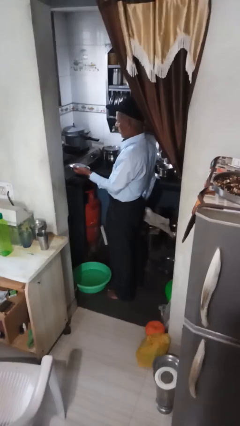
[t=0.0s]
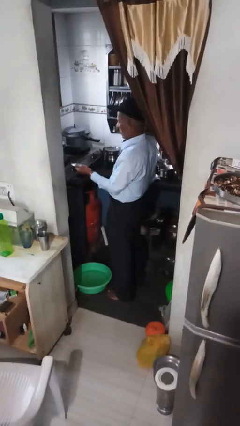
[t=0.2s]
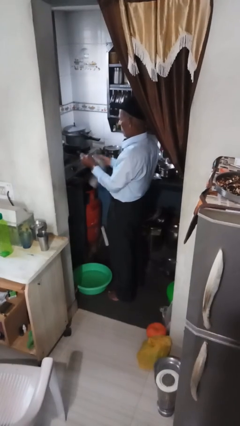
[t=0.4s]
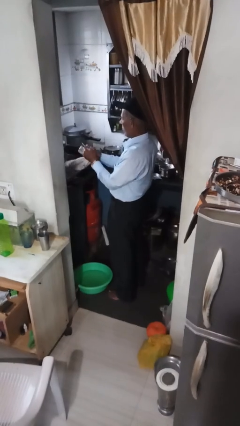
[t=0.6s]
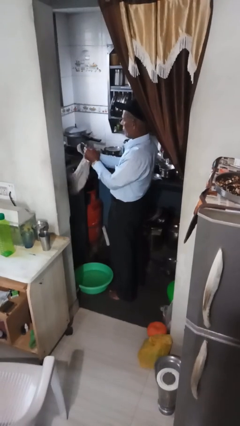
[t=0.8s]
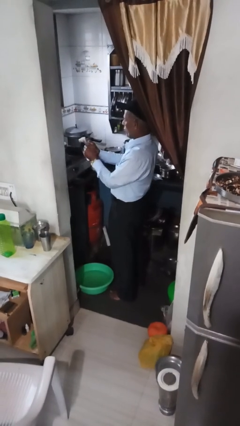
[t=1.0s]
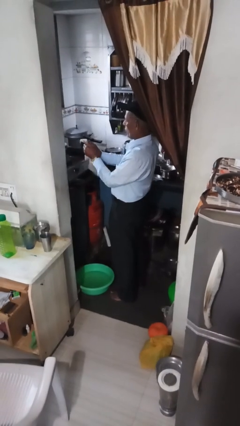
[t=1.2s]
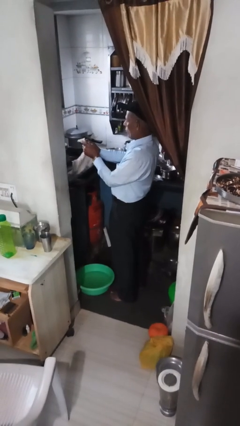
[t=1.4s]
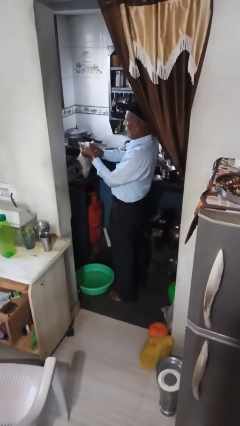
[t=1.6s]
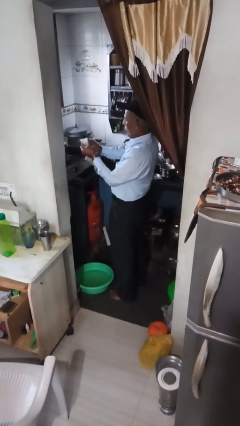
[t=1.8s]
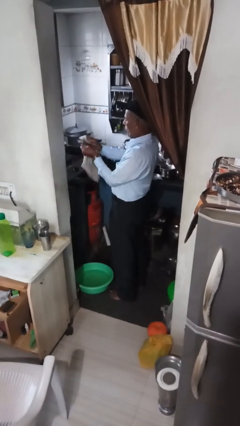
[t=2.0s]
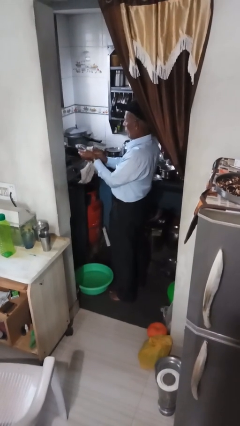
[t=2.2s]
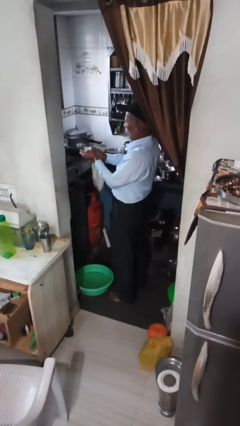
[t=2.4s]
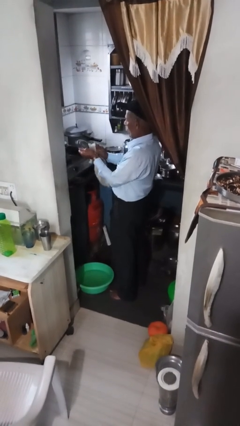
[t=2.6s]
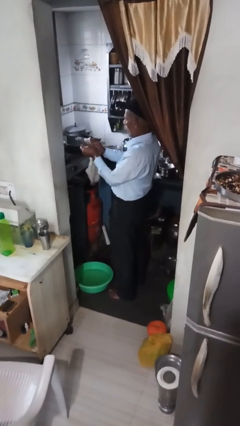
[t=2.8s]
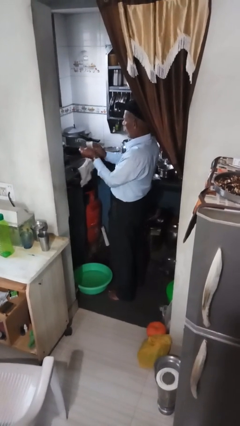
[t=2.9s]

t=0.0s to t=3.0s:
person dries dish

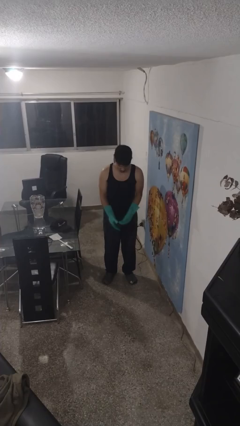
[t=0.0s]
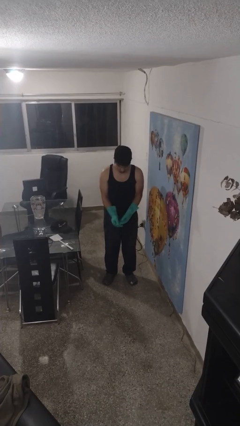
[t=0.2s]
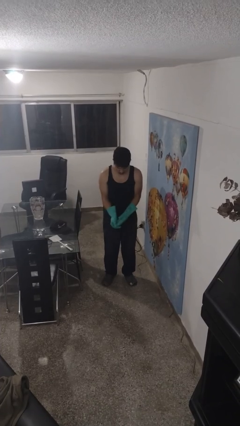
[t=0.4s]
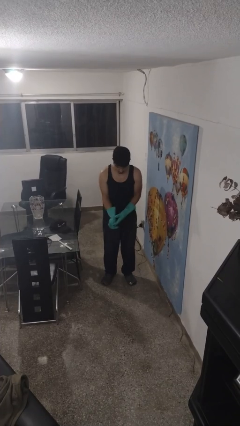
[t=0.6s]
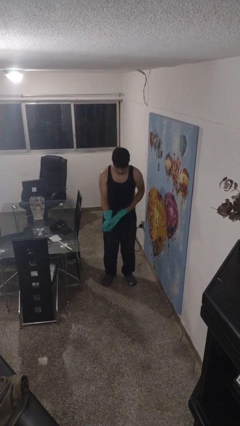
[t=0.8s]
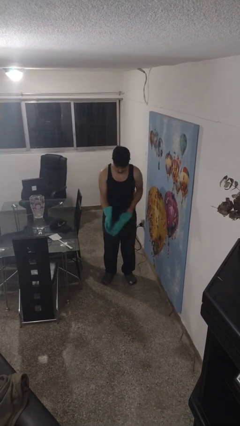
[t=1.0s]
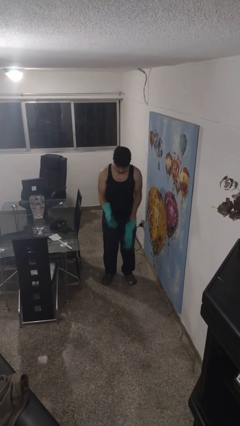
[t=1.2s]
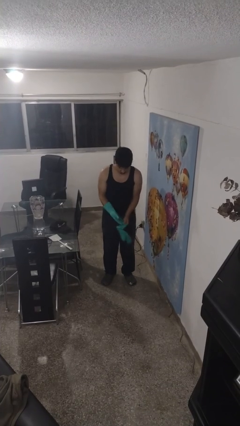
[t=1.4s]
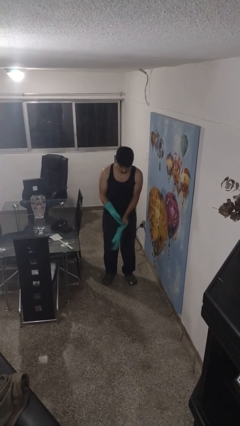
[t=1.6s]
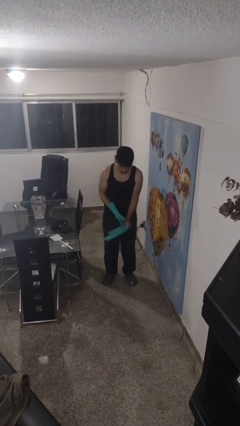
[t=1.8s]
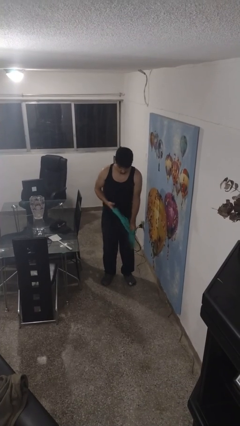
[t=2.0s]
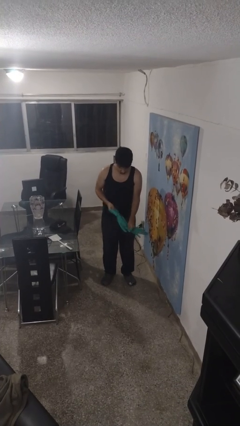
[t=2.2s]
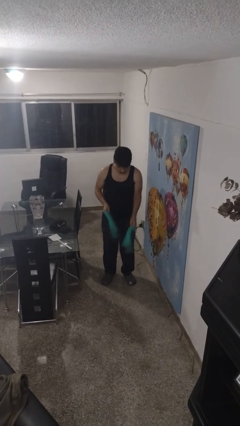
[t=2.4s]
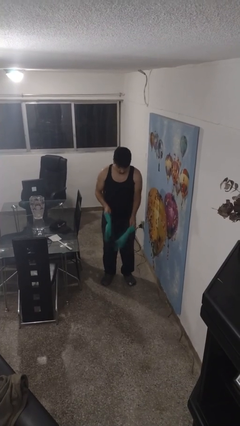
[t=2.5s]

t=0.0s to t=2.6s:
person takes off gloves

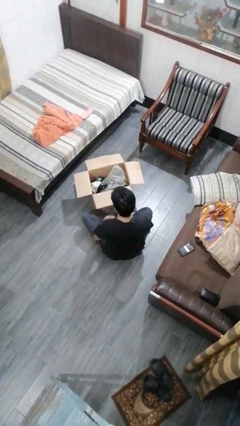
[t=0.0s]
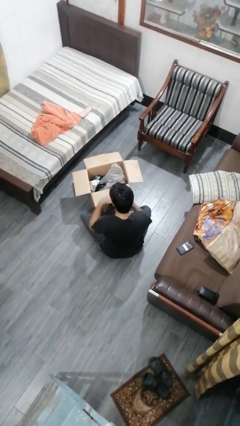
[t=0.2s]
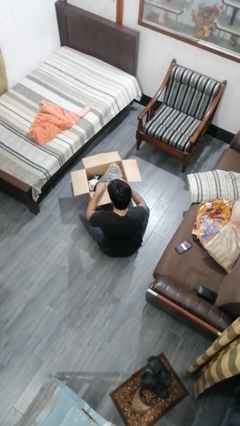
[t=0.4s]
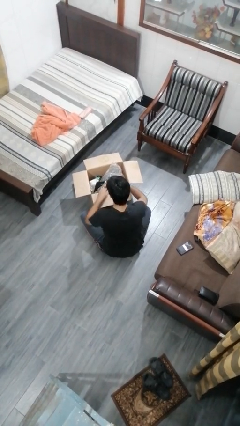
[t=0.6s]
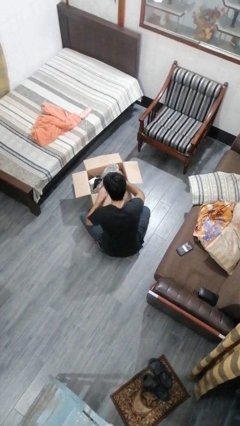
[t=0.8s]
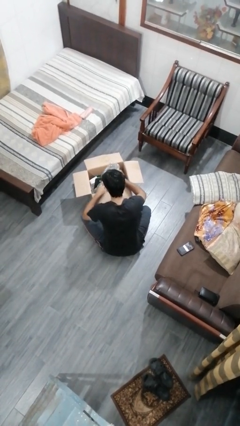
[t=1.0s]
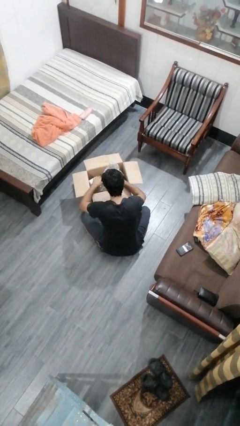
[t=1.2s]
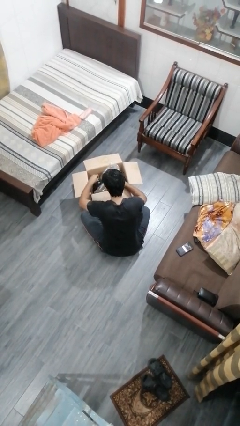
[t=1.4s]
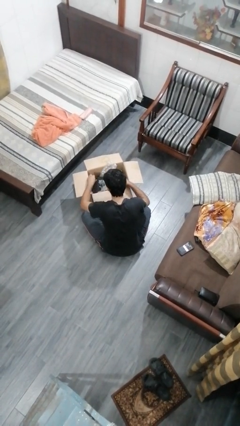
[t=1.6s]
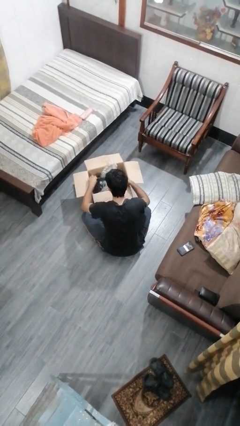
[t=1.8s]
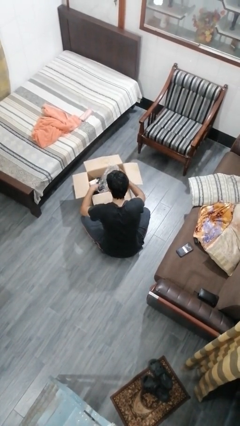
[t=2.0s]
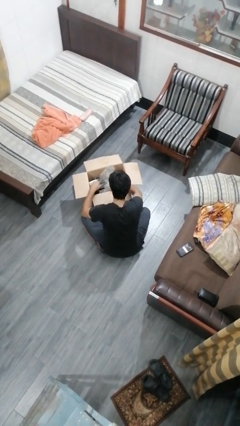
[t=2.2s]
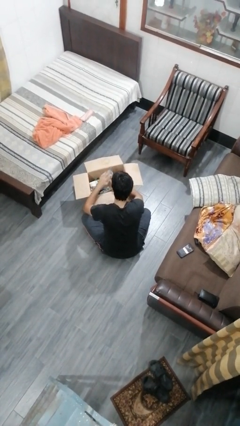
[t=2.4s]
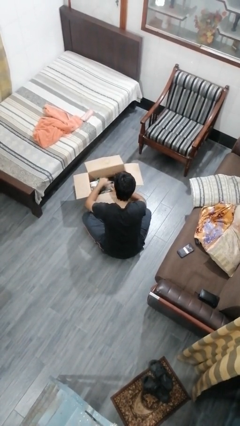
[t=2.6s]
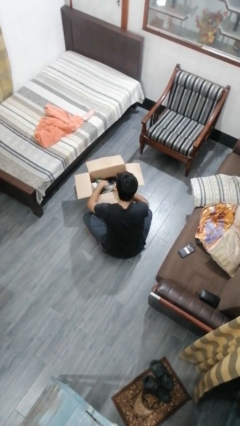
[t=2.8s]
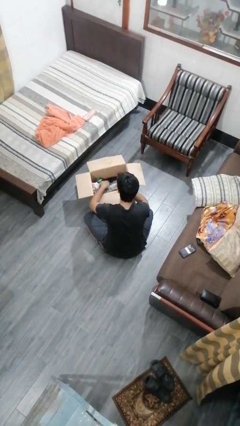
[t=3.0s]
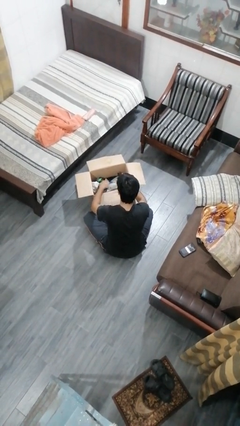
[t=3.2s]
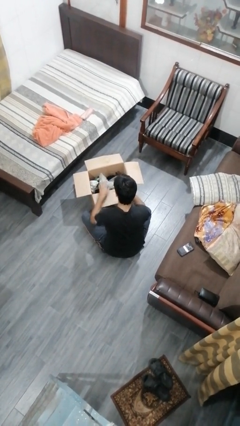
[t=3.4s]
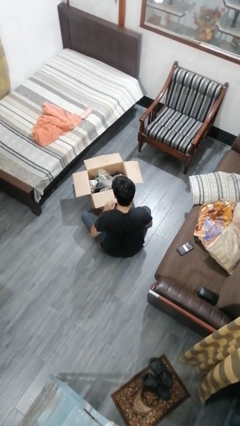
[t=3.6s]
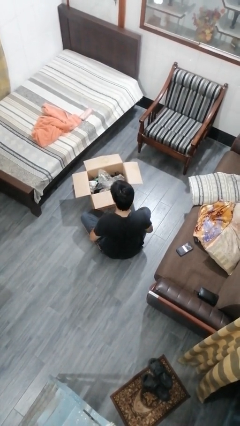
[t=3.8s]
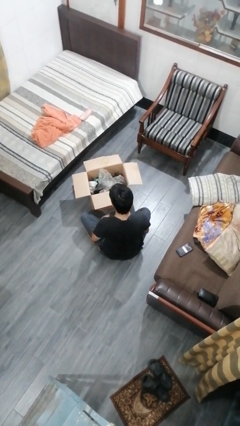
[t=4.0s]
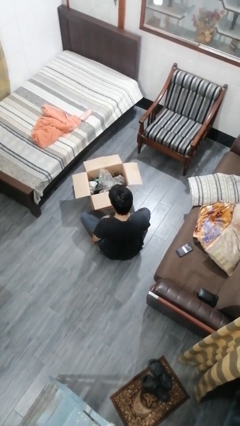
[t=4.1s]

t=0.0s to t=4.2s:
person searches in box

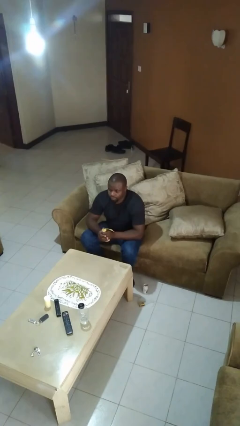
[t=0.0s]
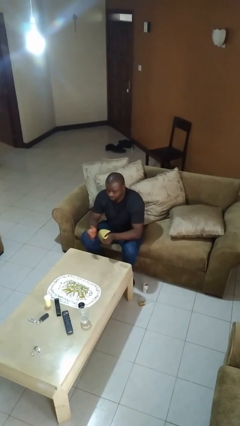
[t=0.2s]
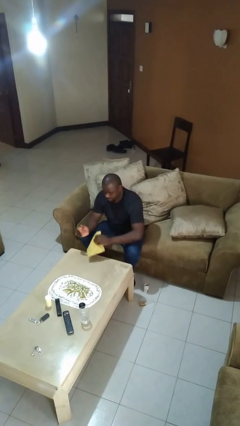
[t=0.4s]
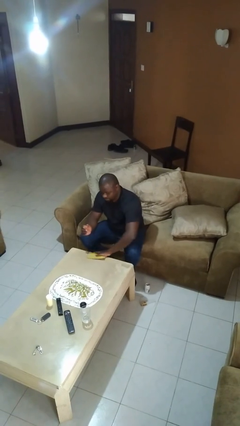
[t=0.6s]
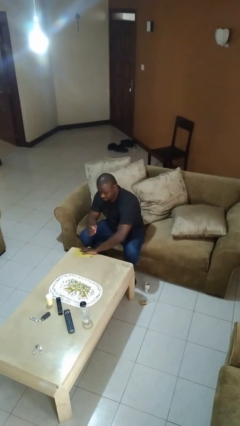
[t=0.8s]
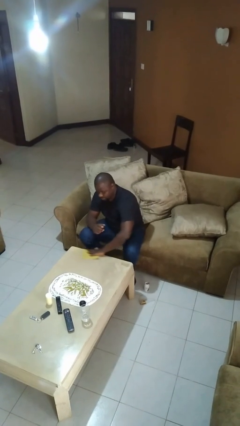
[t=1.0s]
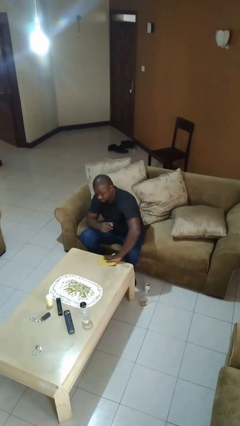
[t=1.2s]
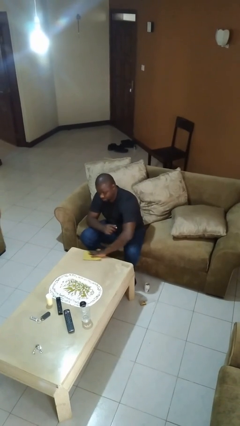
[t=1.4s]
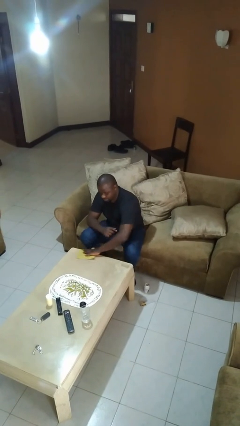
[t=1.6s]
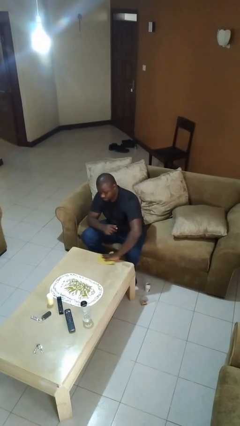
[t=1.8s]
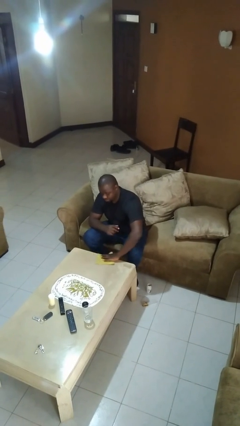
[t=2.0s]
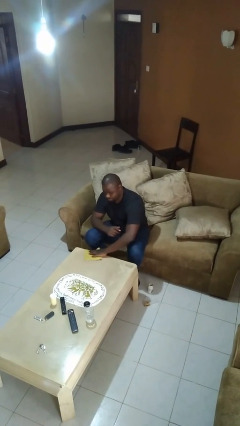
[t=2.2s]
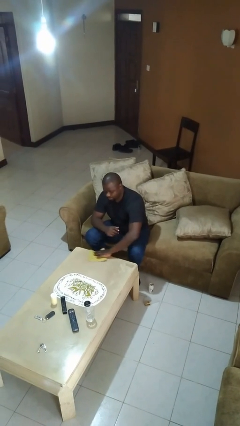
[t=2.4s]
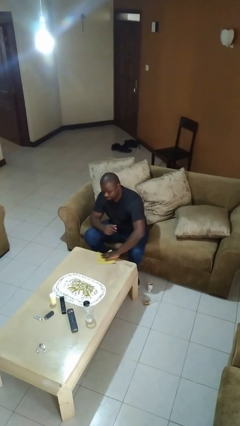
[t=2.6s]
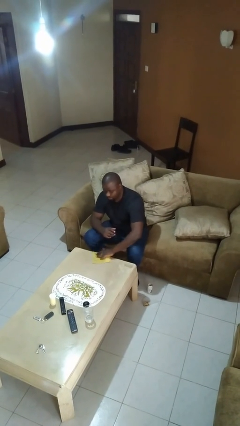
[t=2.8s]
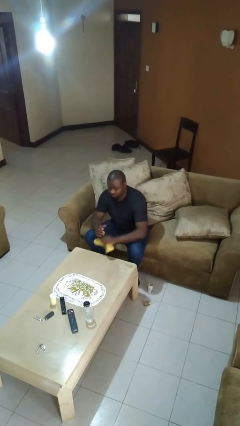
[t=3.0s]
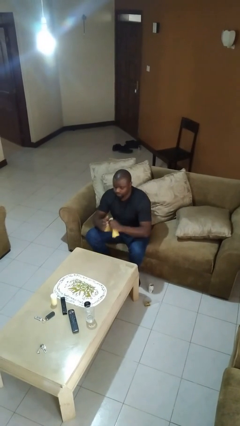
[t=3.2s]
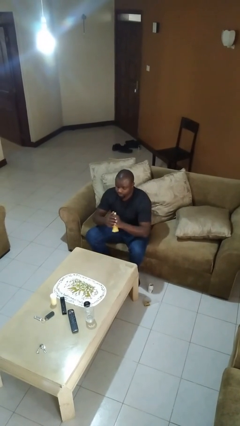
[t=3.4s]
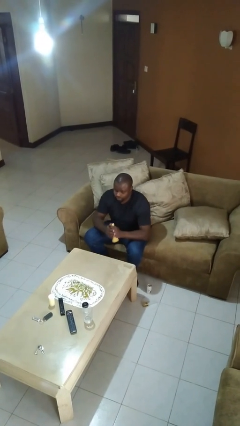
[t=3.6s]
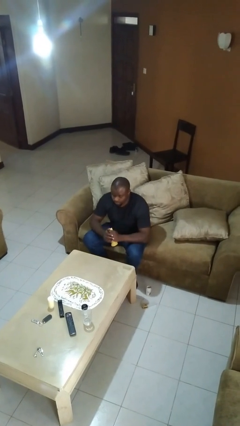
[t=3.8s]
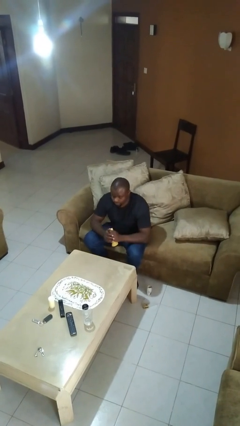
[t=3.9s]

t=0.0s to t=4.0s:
person cleans table with rag

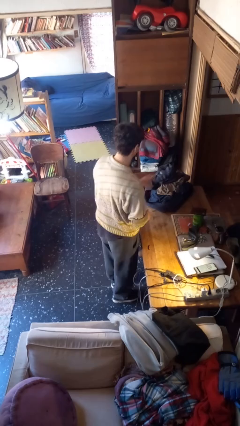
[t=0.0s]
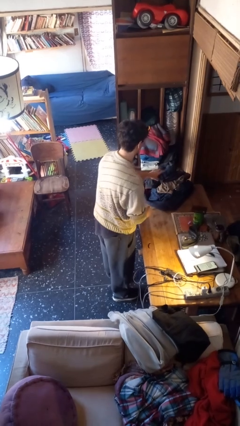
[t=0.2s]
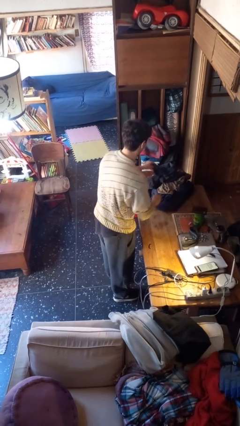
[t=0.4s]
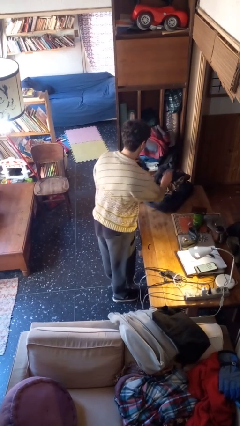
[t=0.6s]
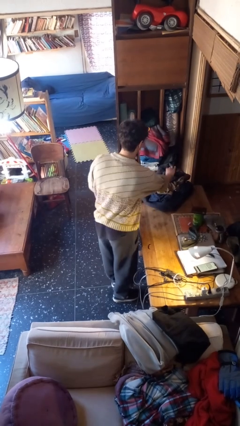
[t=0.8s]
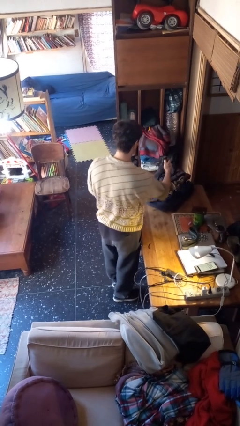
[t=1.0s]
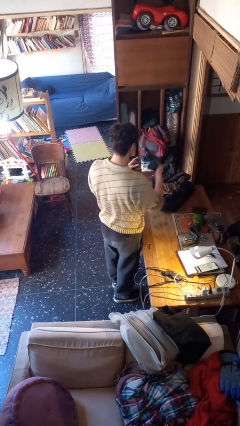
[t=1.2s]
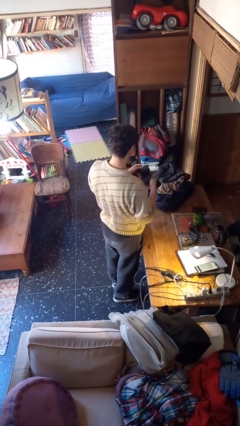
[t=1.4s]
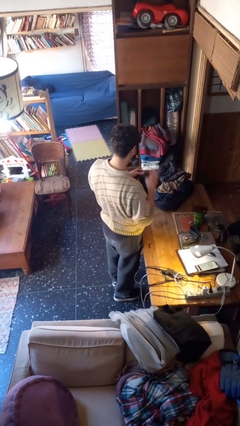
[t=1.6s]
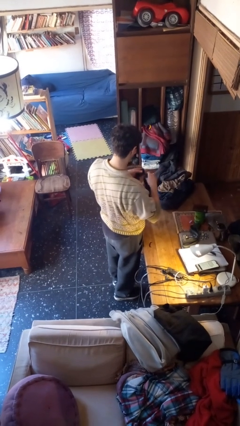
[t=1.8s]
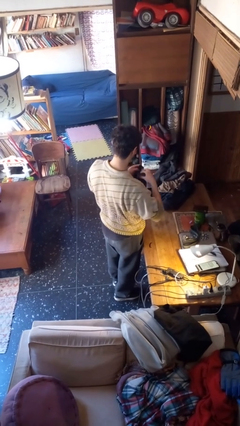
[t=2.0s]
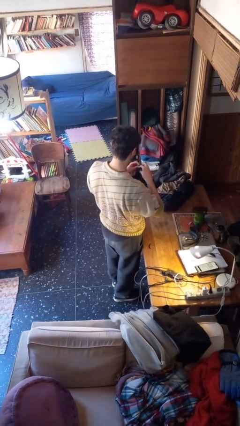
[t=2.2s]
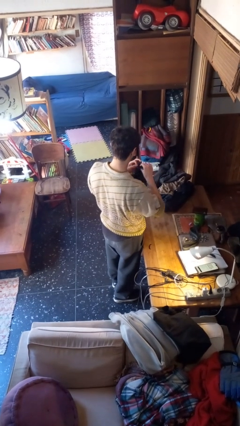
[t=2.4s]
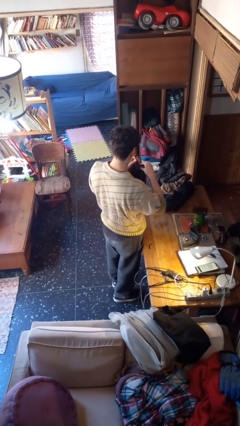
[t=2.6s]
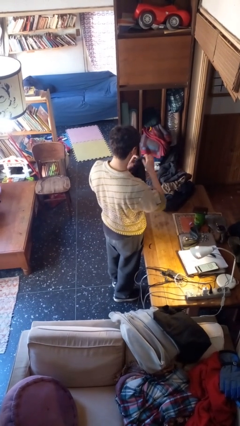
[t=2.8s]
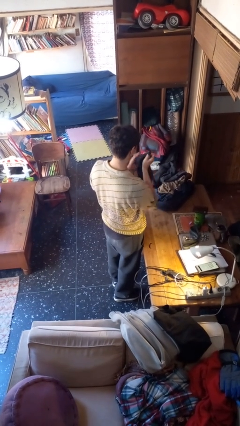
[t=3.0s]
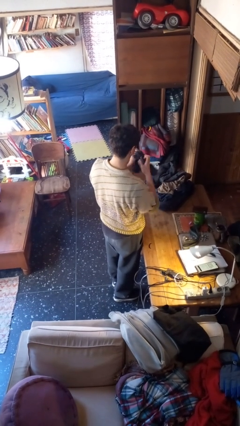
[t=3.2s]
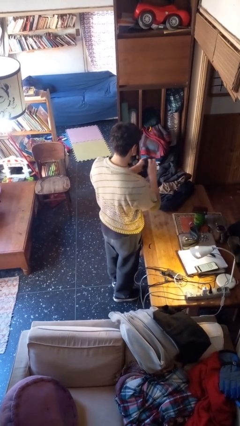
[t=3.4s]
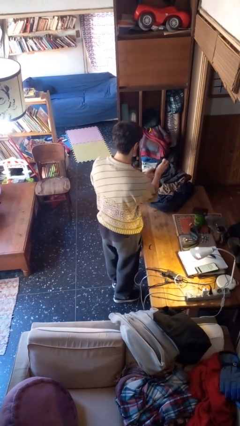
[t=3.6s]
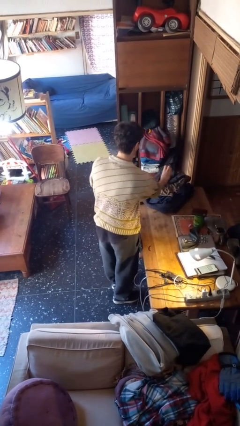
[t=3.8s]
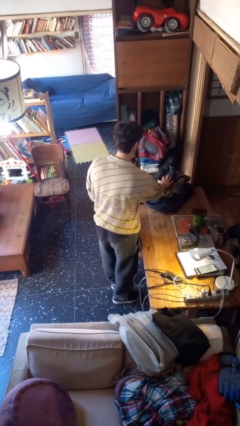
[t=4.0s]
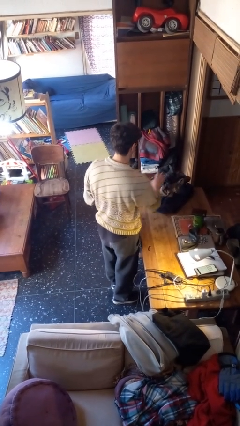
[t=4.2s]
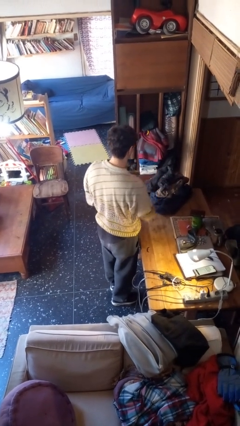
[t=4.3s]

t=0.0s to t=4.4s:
person folds socks
